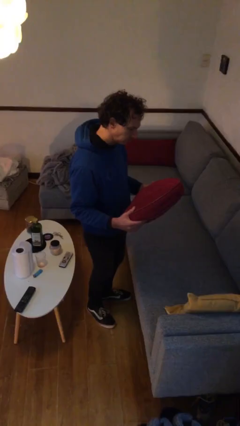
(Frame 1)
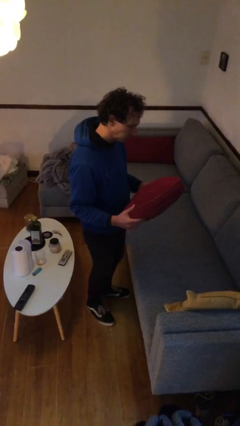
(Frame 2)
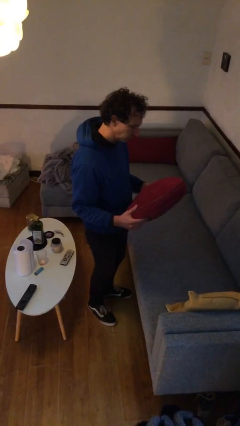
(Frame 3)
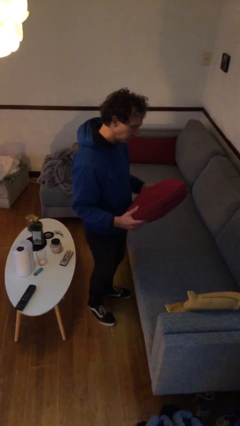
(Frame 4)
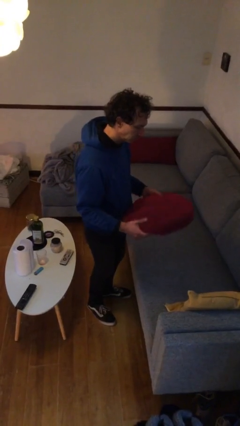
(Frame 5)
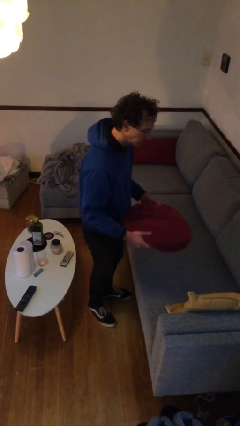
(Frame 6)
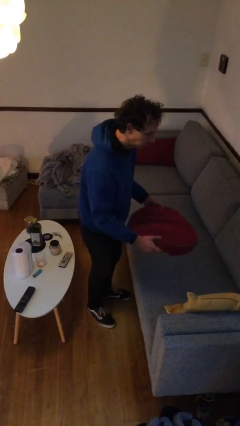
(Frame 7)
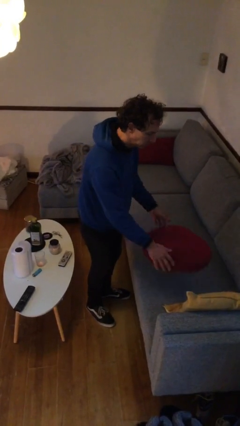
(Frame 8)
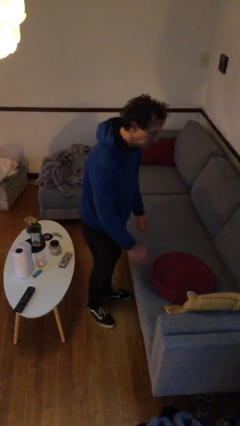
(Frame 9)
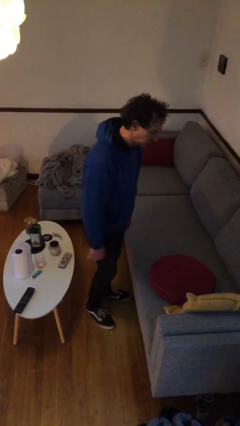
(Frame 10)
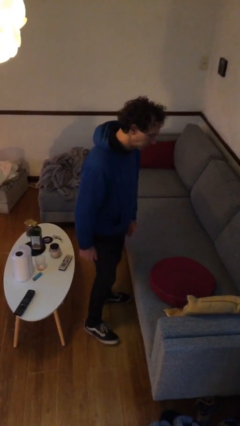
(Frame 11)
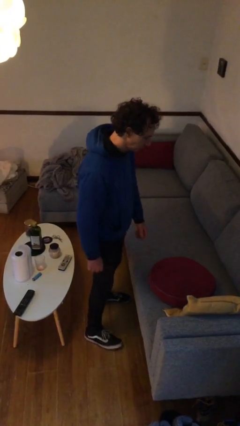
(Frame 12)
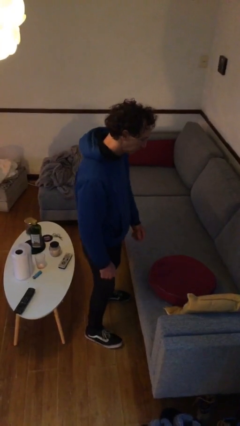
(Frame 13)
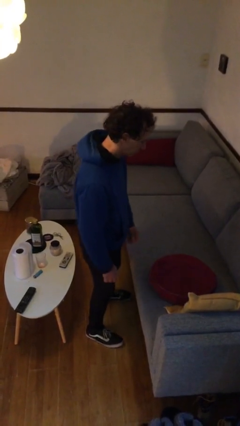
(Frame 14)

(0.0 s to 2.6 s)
person puts down object on couch

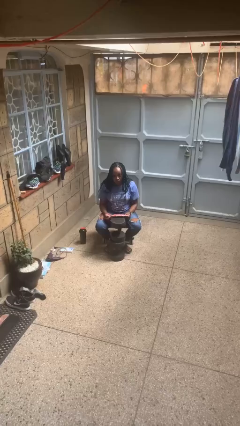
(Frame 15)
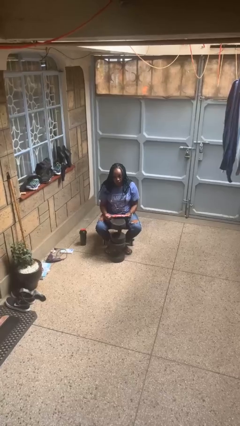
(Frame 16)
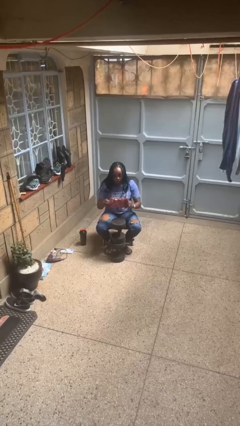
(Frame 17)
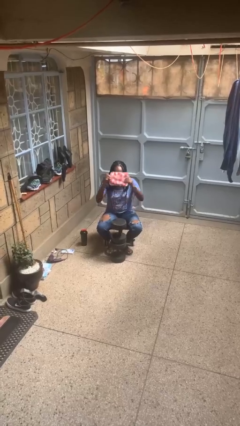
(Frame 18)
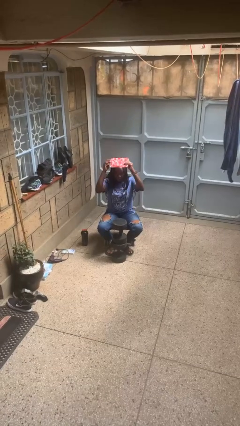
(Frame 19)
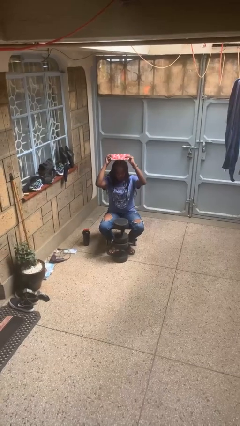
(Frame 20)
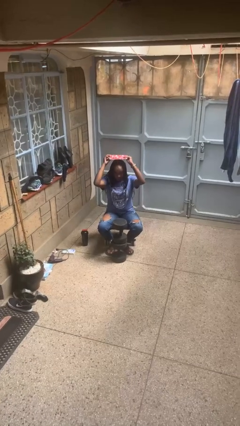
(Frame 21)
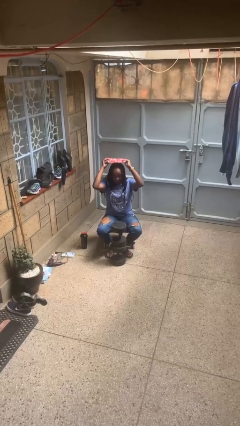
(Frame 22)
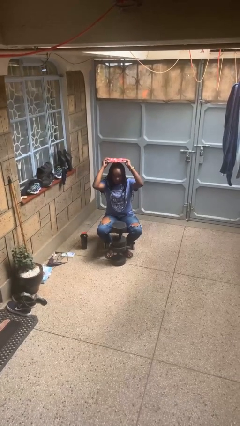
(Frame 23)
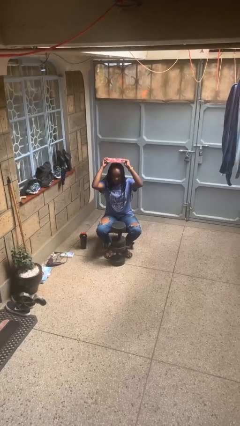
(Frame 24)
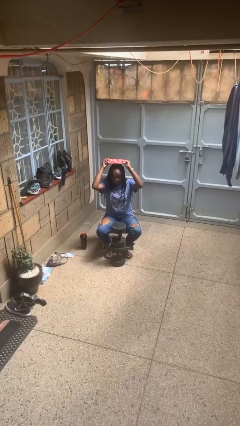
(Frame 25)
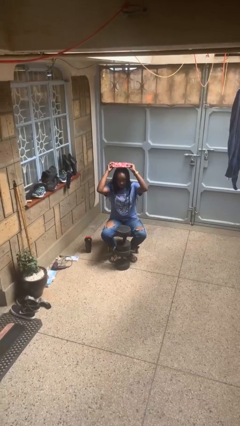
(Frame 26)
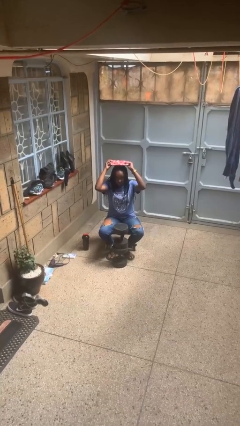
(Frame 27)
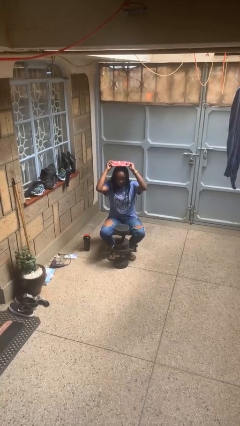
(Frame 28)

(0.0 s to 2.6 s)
person holds object above head

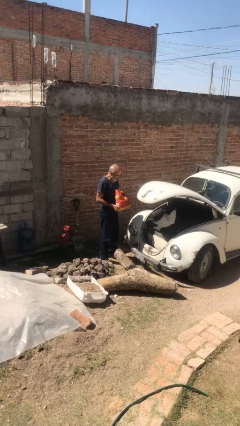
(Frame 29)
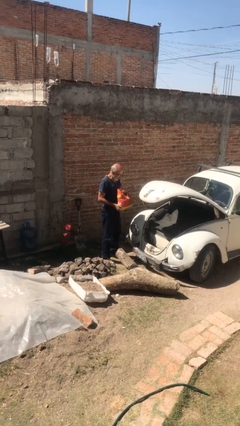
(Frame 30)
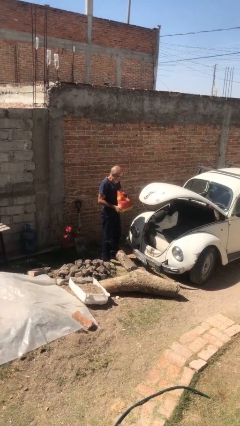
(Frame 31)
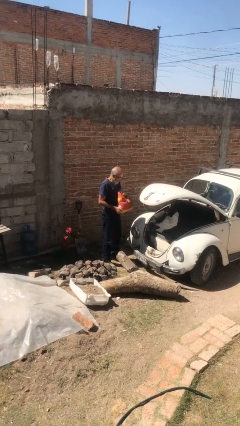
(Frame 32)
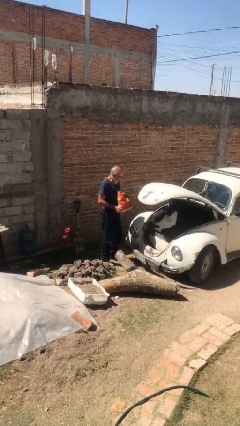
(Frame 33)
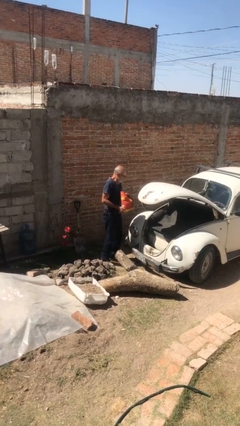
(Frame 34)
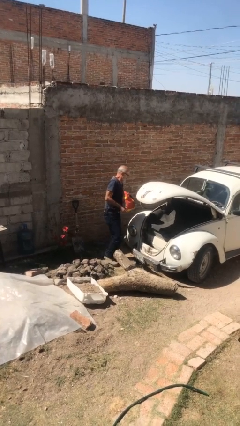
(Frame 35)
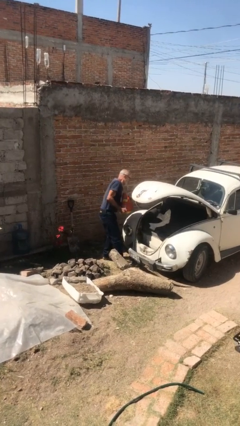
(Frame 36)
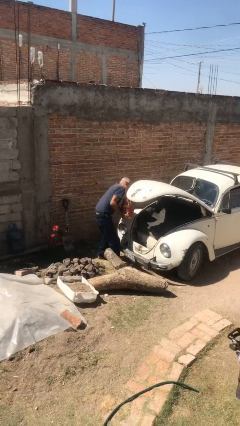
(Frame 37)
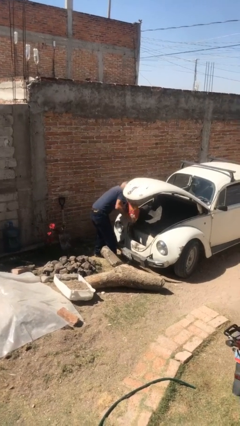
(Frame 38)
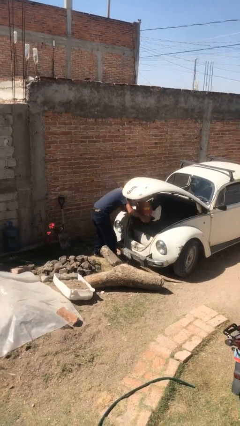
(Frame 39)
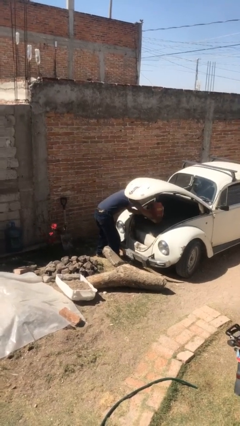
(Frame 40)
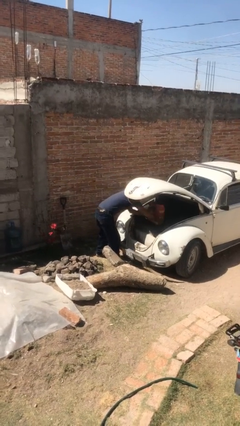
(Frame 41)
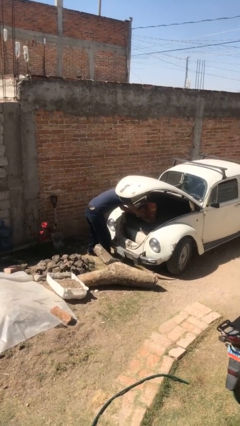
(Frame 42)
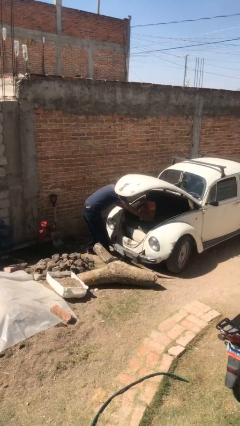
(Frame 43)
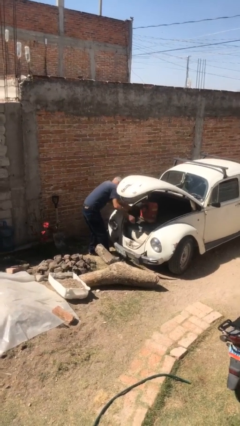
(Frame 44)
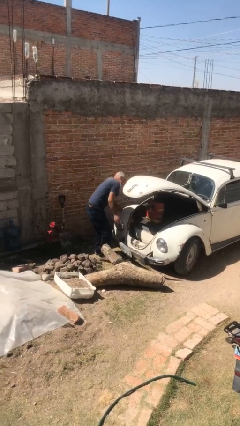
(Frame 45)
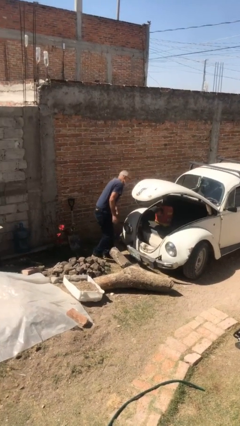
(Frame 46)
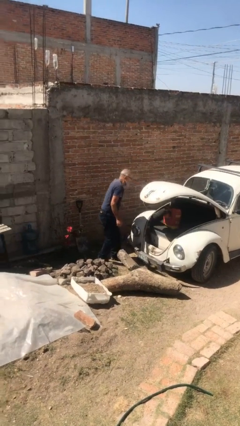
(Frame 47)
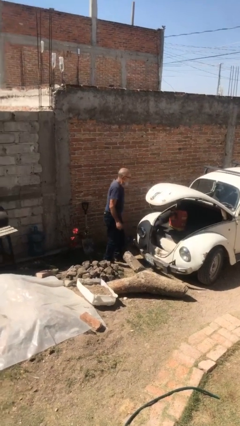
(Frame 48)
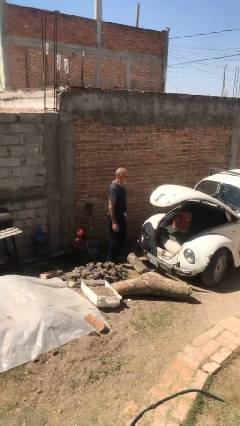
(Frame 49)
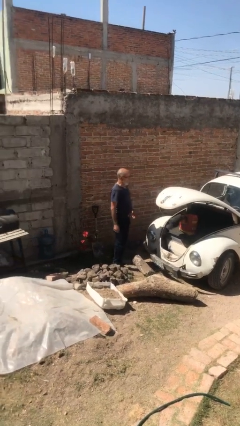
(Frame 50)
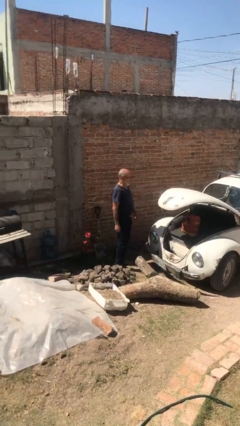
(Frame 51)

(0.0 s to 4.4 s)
person loads car

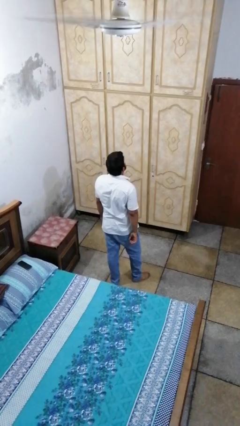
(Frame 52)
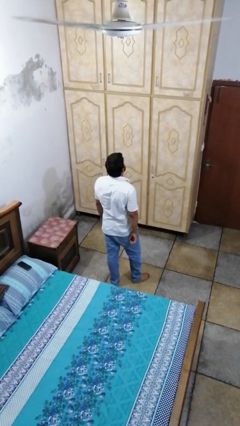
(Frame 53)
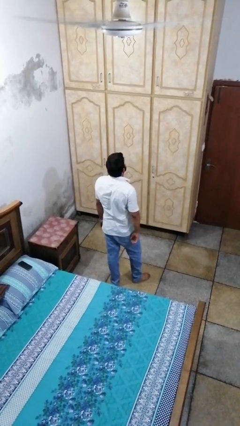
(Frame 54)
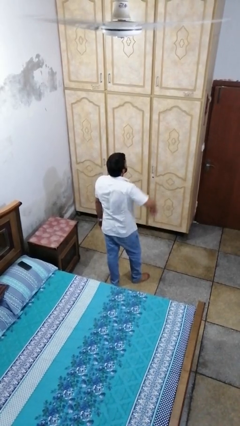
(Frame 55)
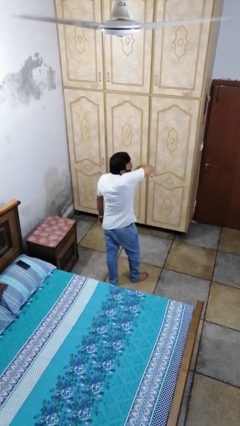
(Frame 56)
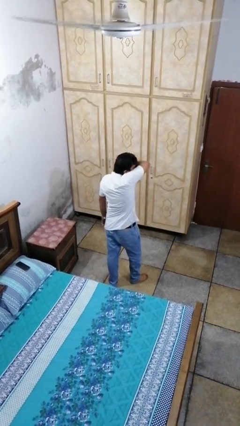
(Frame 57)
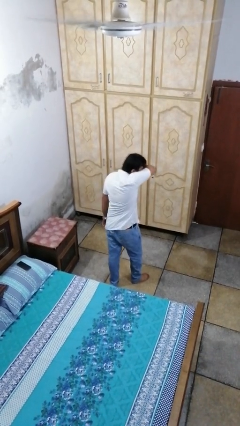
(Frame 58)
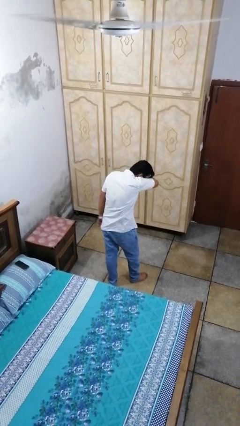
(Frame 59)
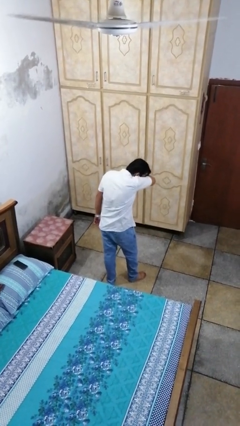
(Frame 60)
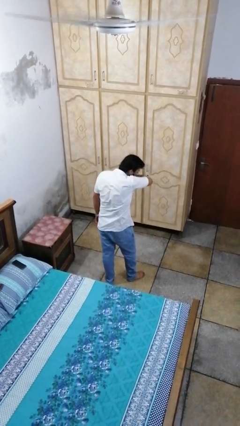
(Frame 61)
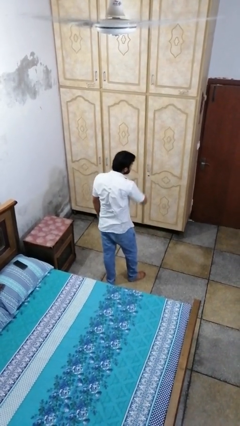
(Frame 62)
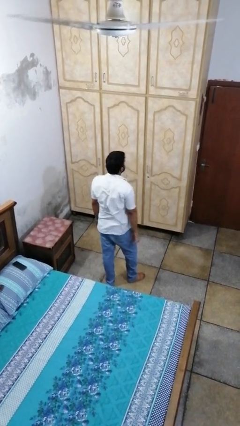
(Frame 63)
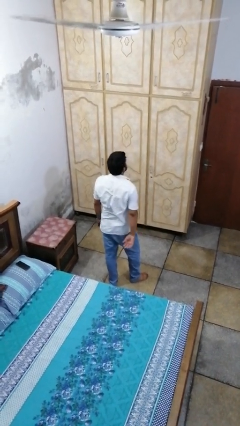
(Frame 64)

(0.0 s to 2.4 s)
person sneezes into arm

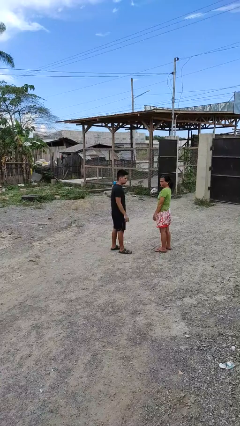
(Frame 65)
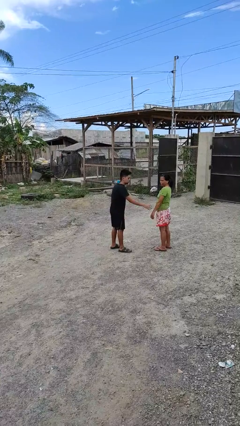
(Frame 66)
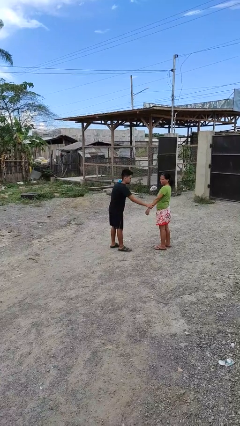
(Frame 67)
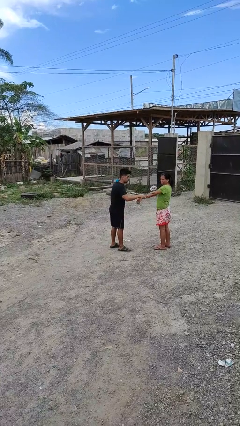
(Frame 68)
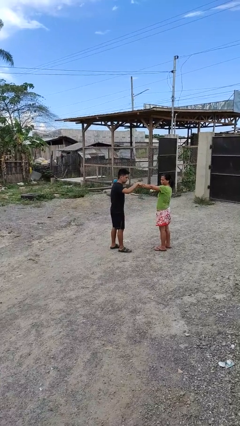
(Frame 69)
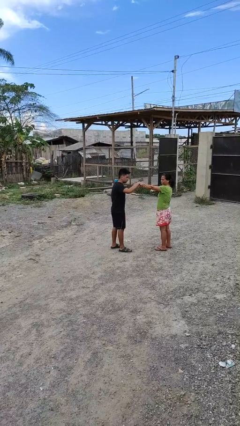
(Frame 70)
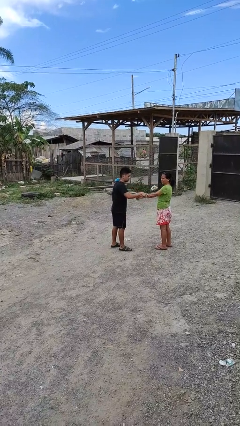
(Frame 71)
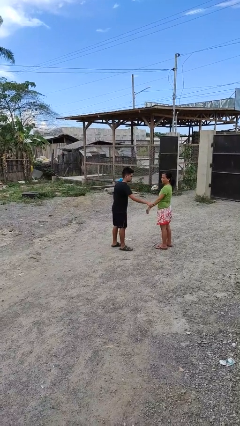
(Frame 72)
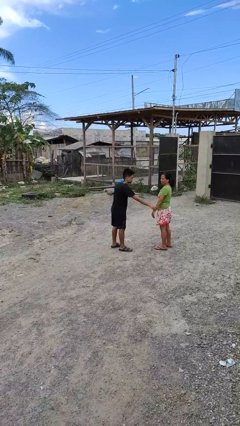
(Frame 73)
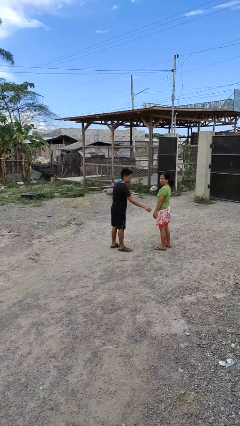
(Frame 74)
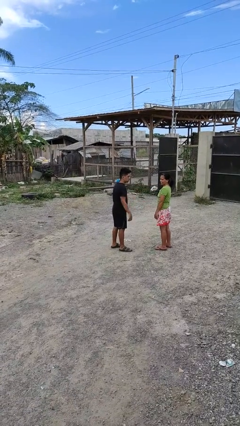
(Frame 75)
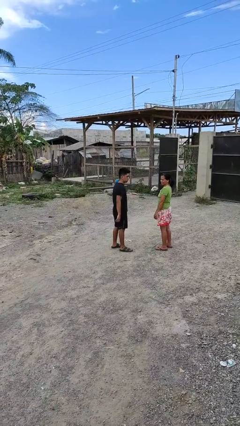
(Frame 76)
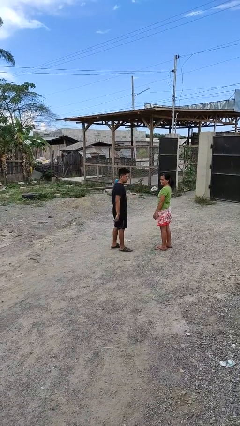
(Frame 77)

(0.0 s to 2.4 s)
person grabs person by forearm

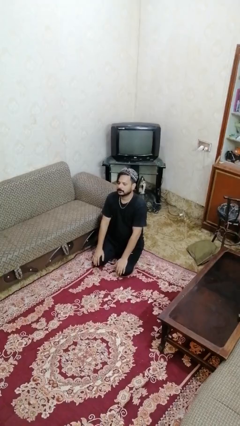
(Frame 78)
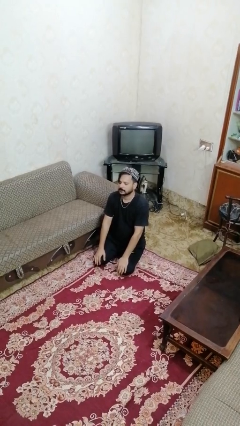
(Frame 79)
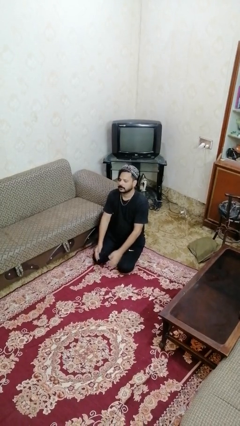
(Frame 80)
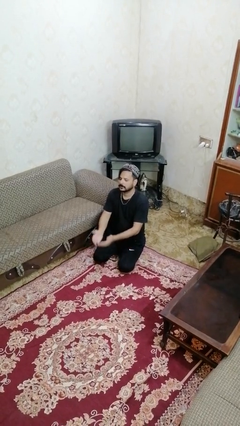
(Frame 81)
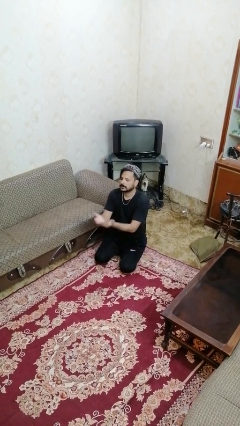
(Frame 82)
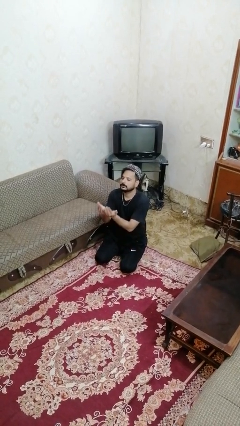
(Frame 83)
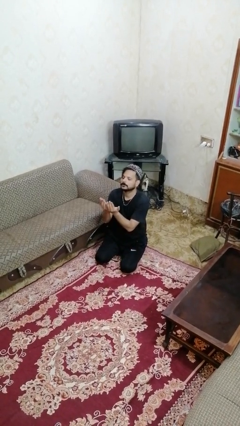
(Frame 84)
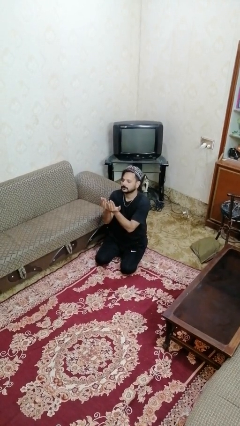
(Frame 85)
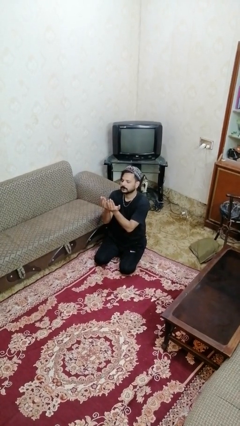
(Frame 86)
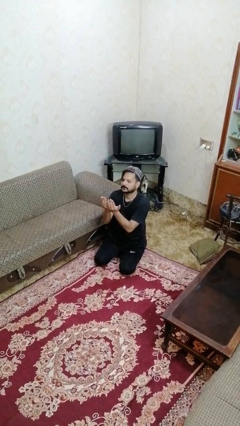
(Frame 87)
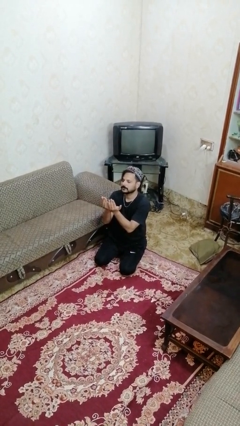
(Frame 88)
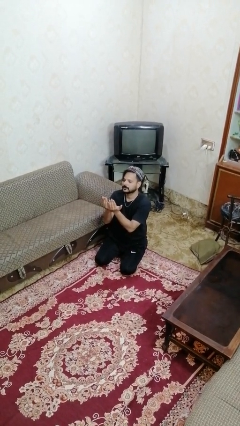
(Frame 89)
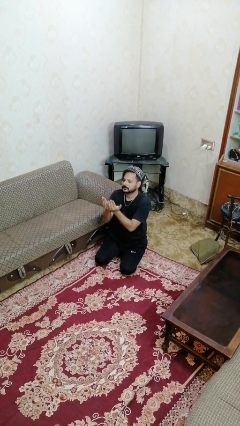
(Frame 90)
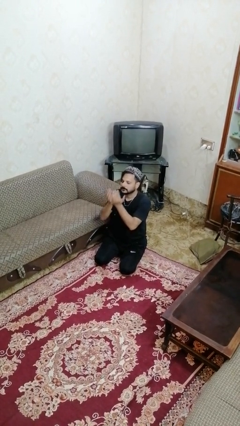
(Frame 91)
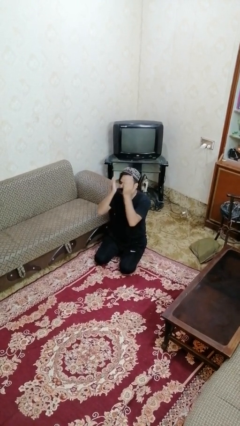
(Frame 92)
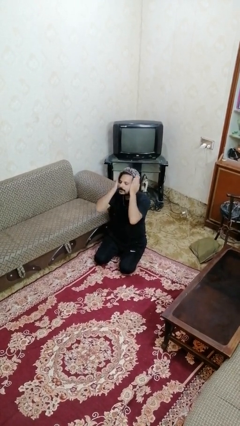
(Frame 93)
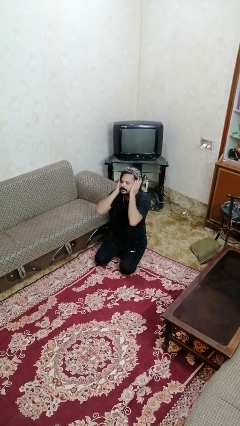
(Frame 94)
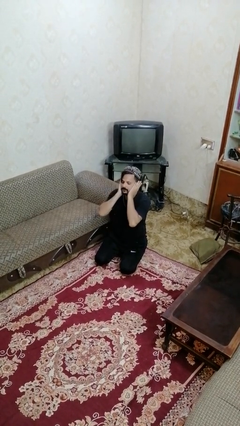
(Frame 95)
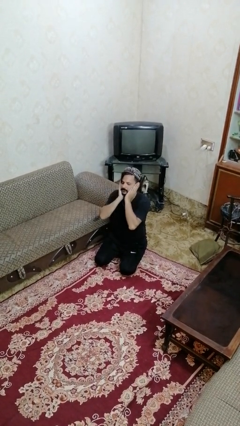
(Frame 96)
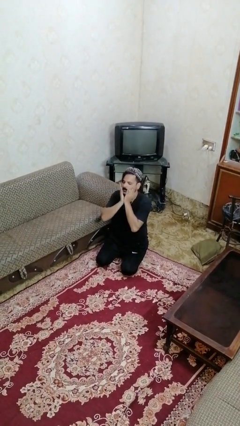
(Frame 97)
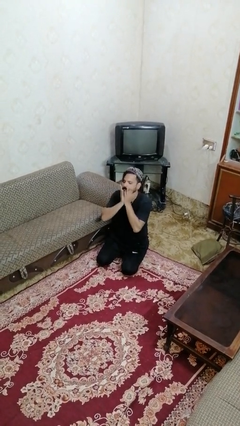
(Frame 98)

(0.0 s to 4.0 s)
person prays
